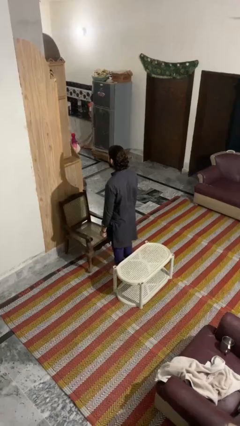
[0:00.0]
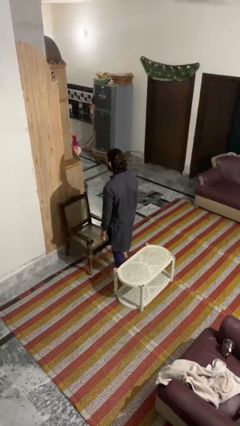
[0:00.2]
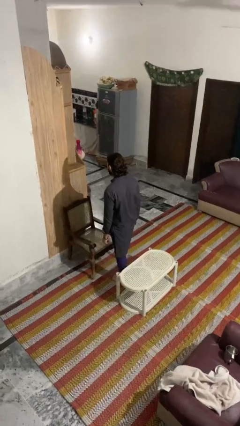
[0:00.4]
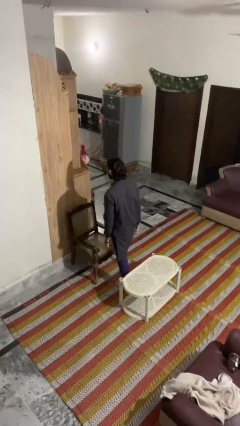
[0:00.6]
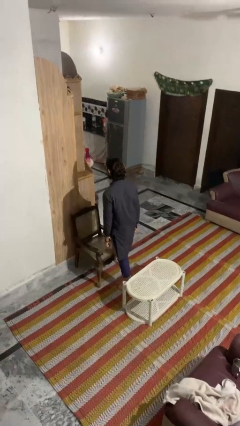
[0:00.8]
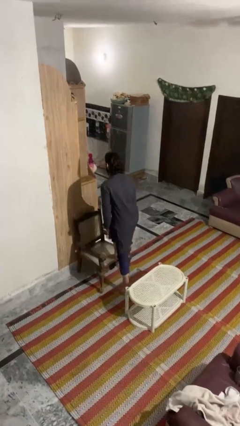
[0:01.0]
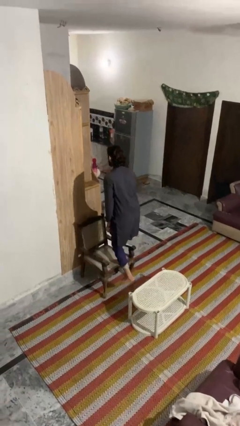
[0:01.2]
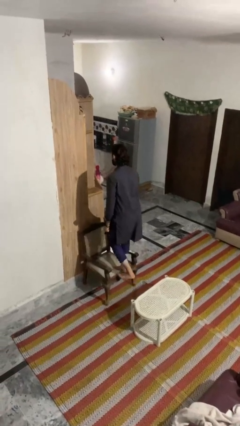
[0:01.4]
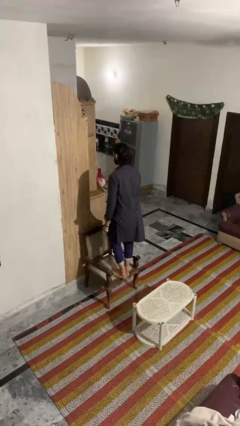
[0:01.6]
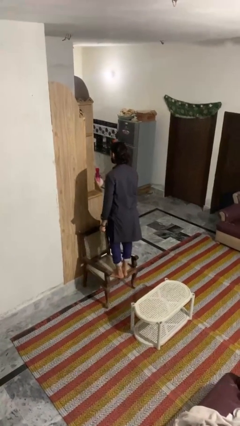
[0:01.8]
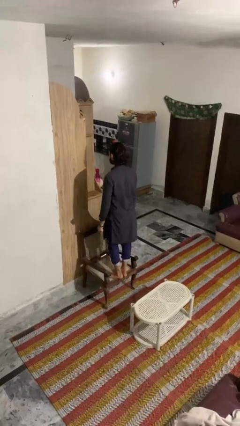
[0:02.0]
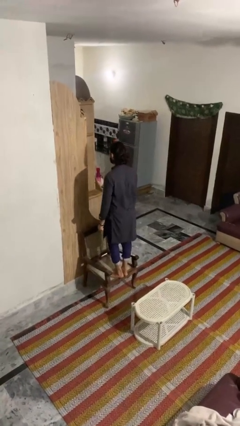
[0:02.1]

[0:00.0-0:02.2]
person climbs on chair

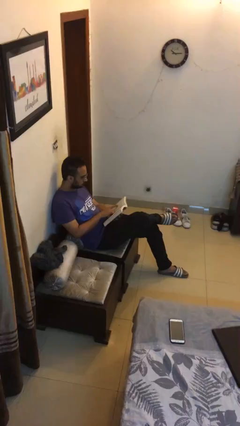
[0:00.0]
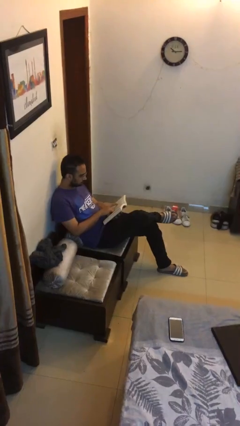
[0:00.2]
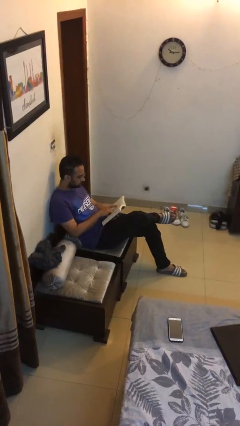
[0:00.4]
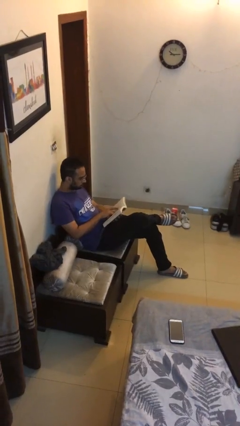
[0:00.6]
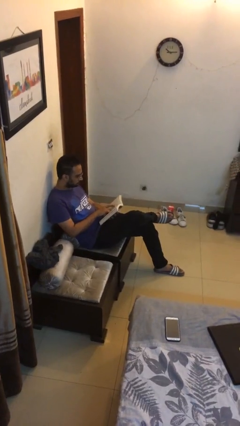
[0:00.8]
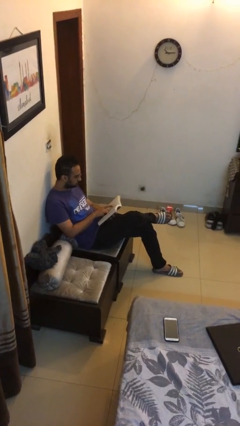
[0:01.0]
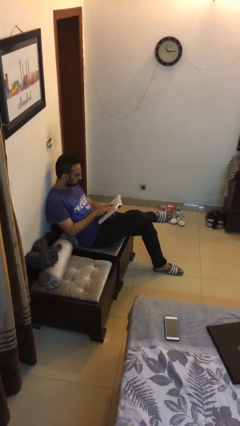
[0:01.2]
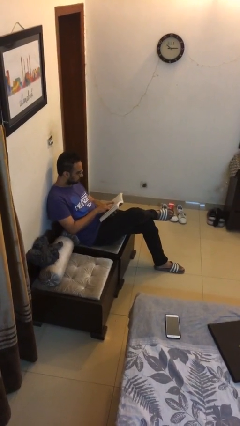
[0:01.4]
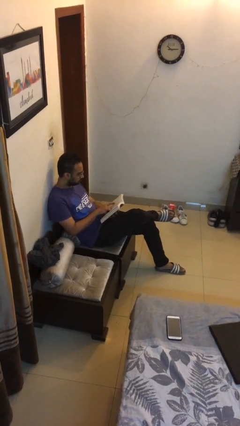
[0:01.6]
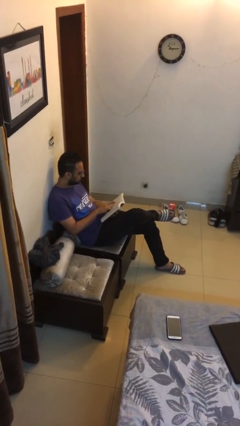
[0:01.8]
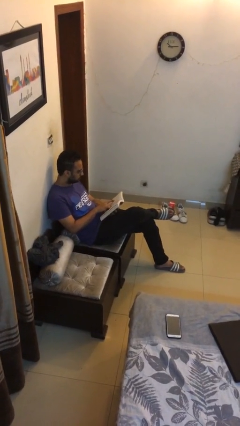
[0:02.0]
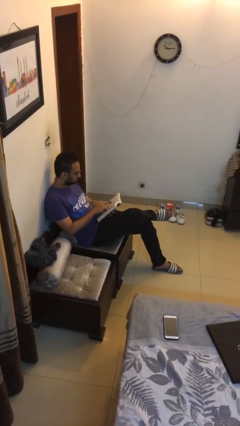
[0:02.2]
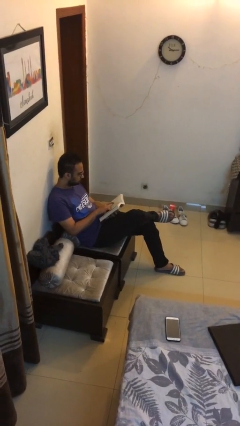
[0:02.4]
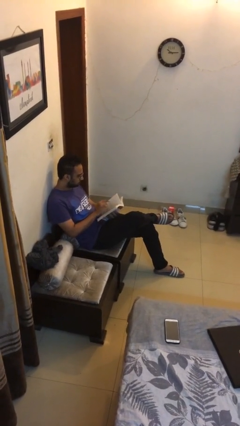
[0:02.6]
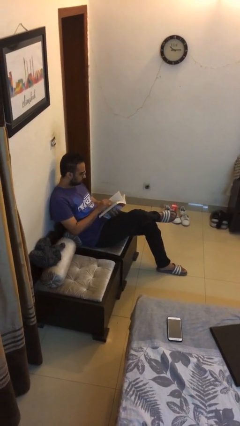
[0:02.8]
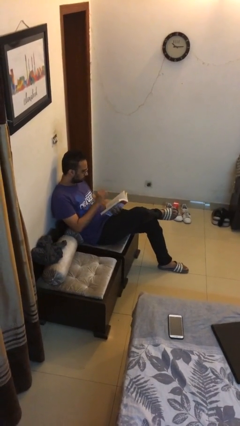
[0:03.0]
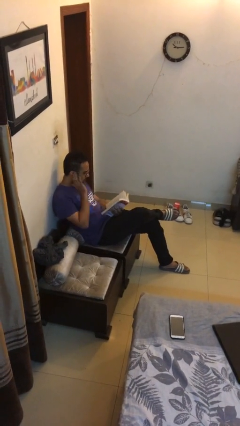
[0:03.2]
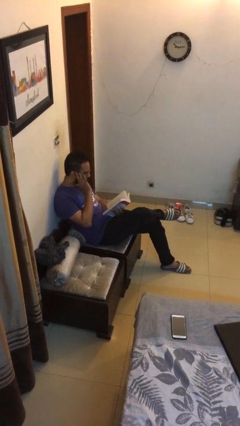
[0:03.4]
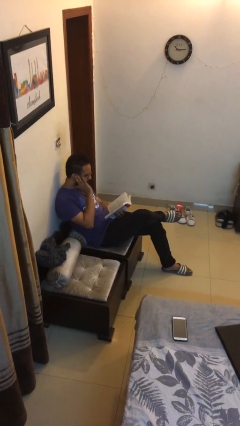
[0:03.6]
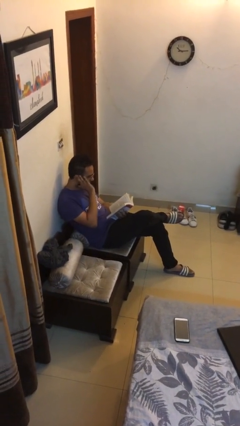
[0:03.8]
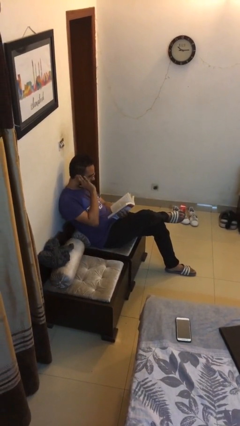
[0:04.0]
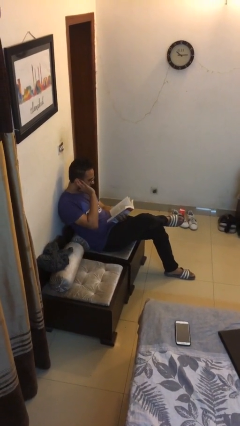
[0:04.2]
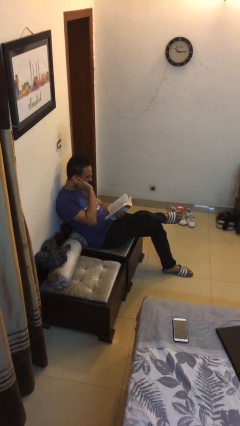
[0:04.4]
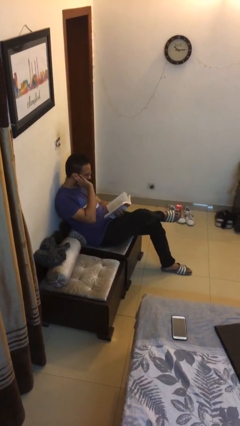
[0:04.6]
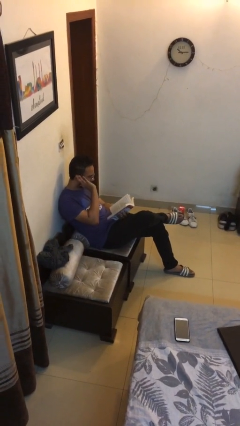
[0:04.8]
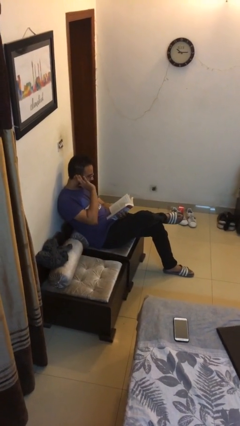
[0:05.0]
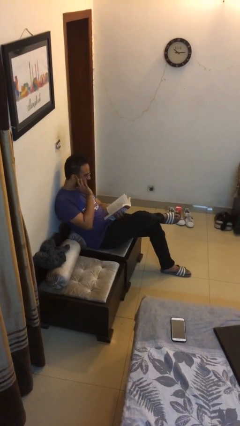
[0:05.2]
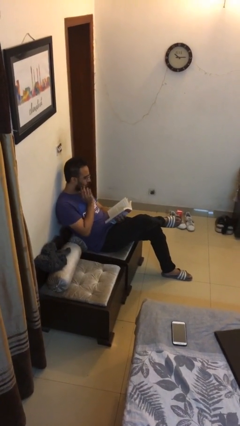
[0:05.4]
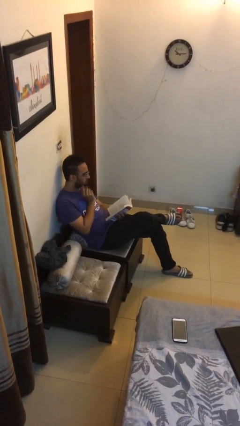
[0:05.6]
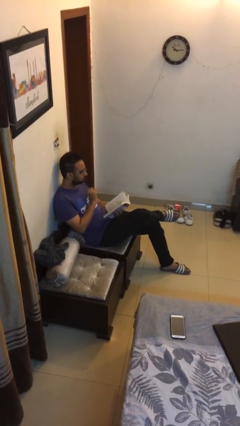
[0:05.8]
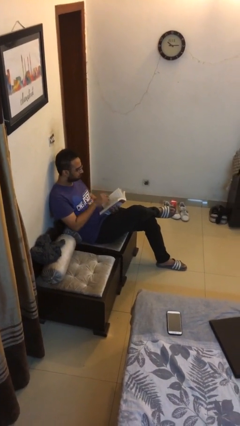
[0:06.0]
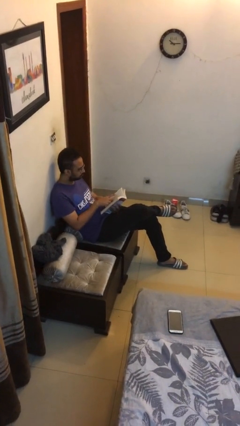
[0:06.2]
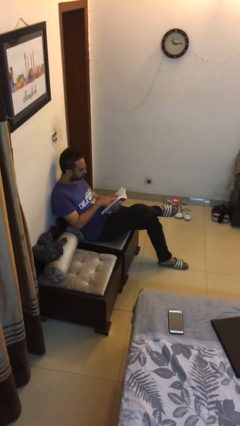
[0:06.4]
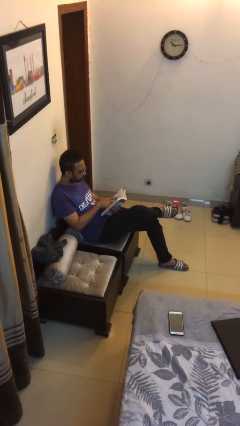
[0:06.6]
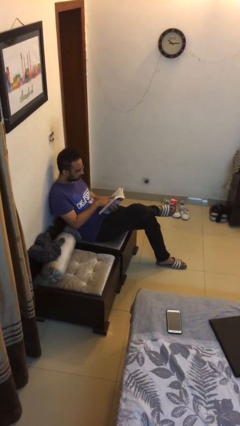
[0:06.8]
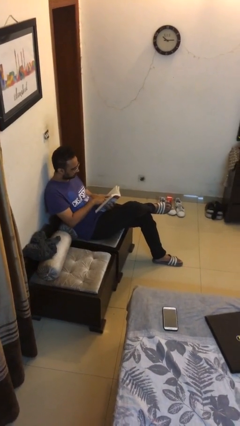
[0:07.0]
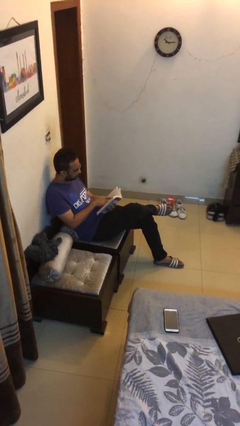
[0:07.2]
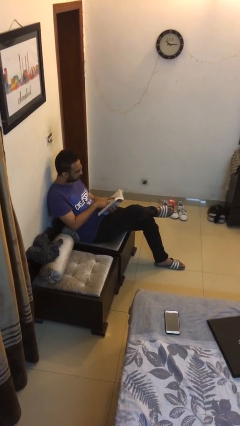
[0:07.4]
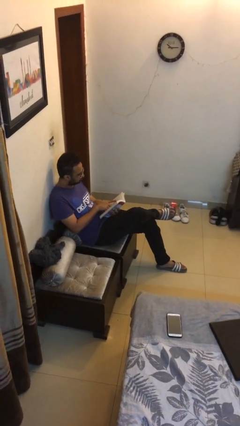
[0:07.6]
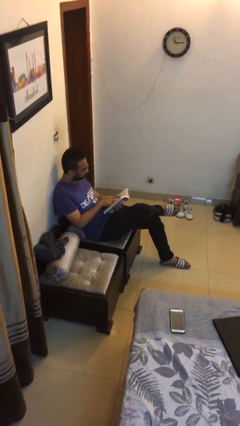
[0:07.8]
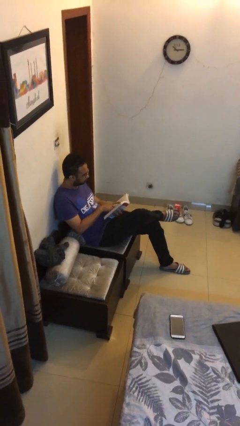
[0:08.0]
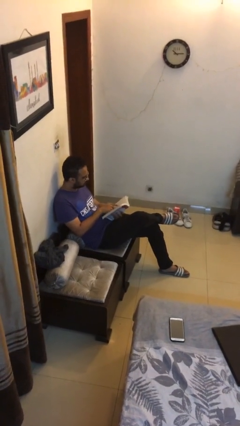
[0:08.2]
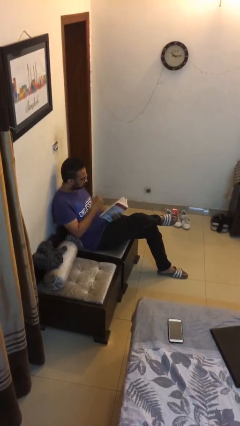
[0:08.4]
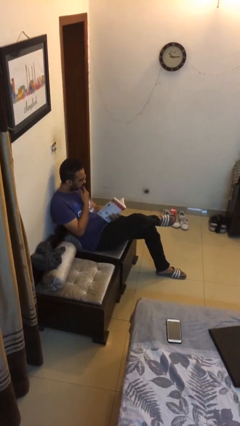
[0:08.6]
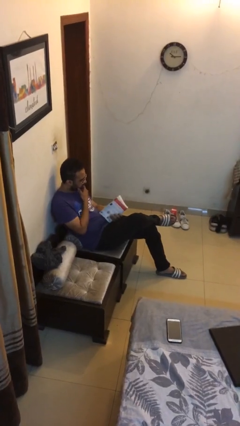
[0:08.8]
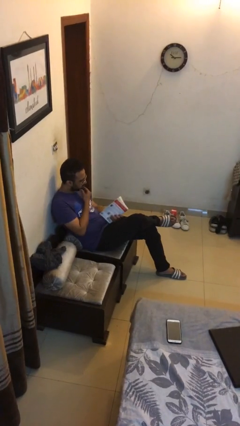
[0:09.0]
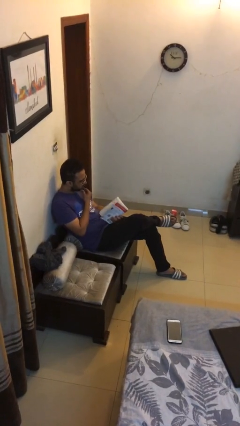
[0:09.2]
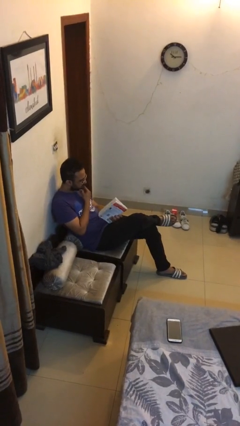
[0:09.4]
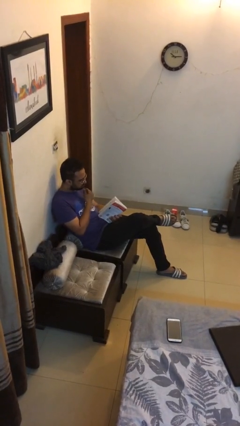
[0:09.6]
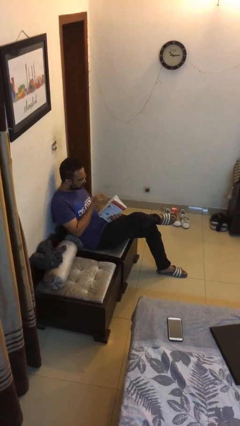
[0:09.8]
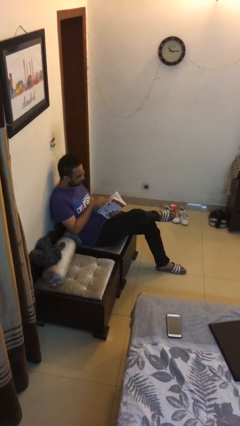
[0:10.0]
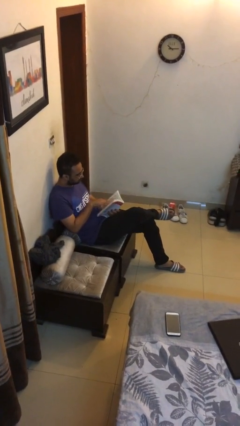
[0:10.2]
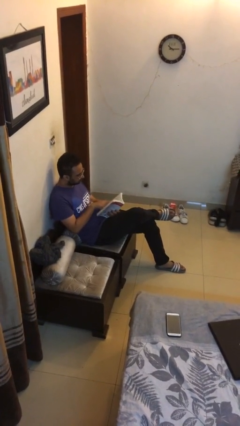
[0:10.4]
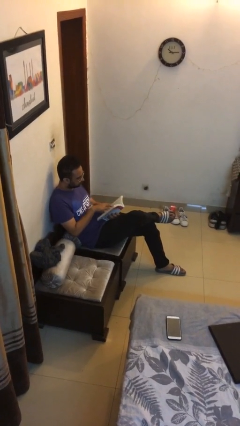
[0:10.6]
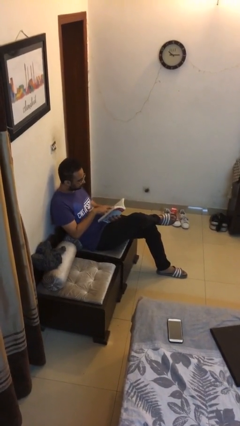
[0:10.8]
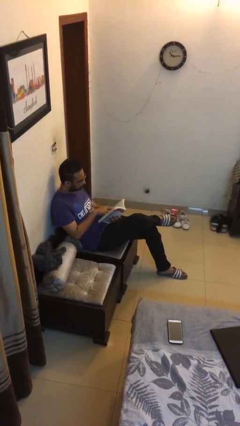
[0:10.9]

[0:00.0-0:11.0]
person reads document

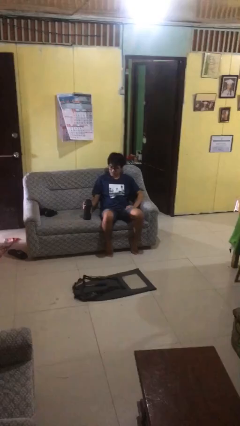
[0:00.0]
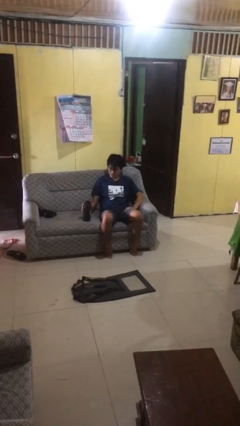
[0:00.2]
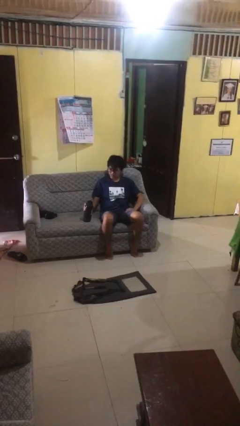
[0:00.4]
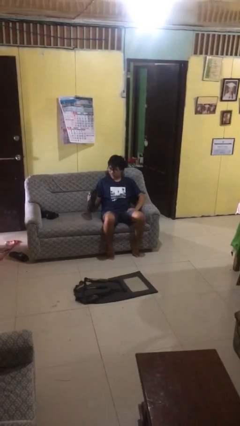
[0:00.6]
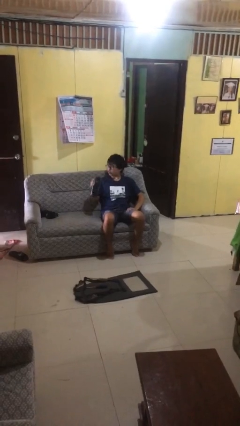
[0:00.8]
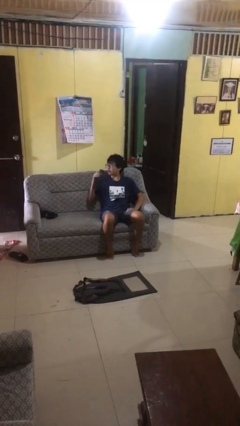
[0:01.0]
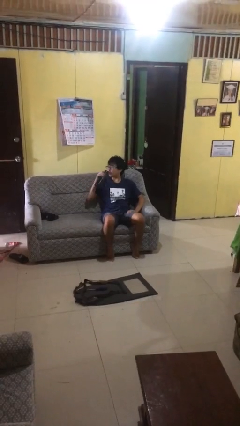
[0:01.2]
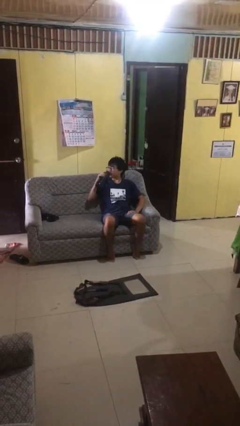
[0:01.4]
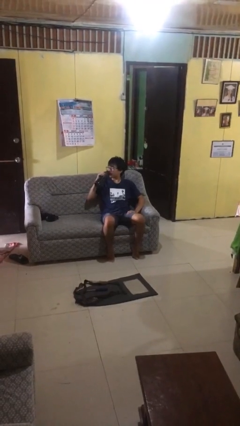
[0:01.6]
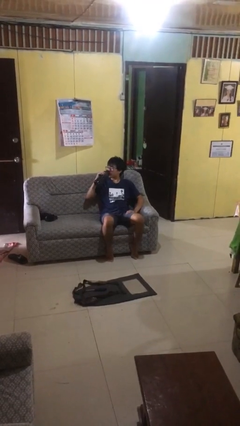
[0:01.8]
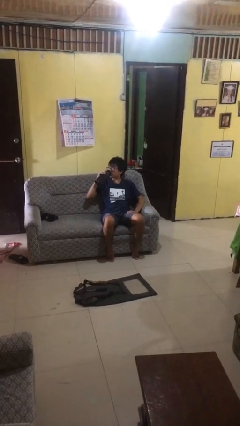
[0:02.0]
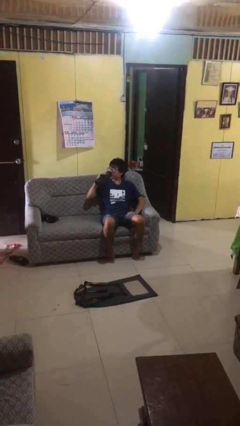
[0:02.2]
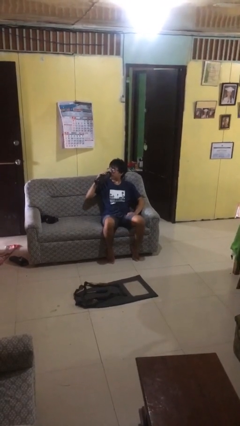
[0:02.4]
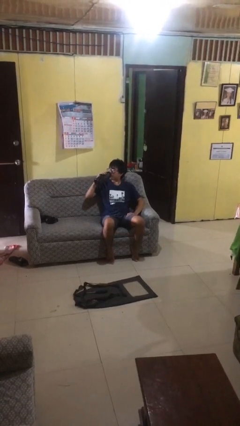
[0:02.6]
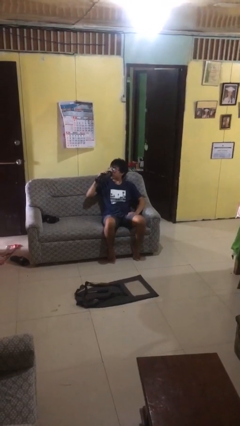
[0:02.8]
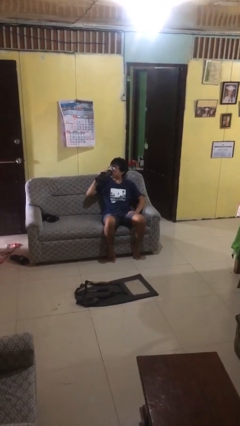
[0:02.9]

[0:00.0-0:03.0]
person drinks from bottle

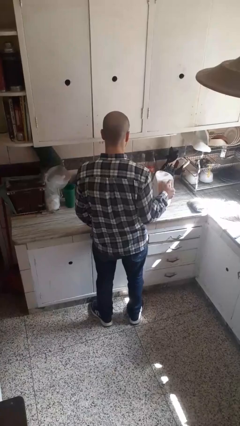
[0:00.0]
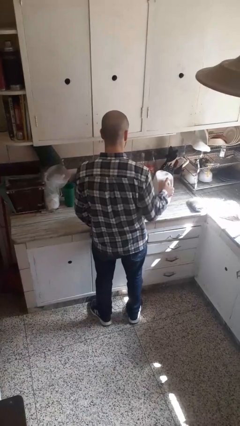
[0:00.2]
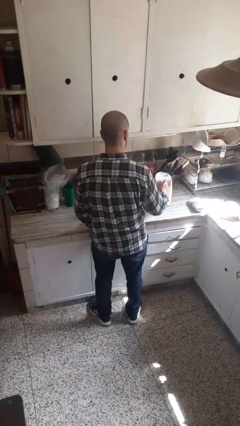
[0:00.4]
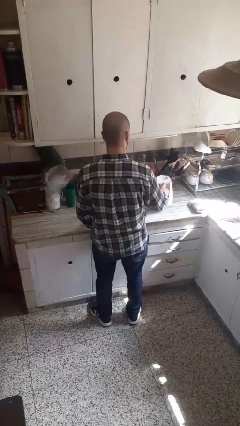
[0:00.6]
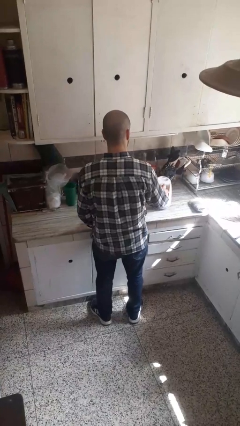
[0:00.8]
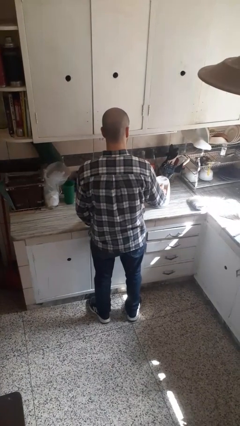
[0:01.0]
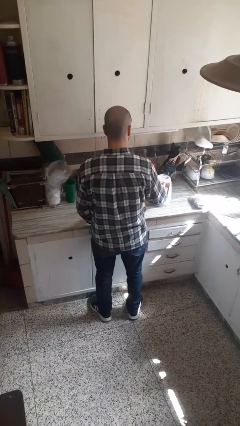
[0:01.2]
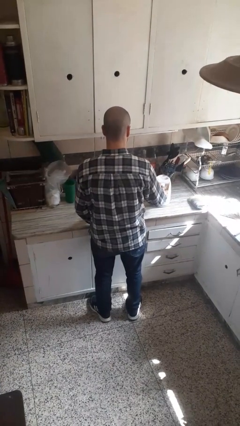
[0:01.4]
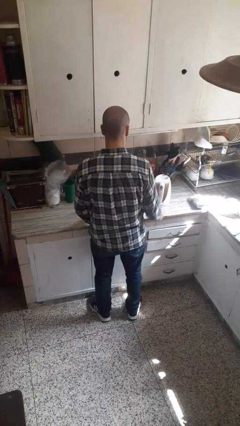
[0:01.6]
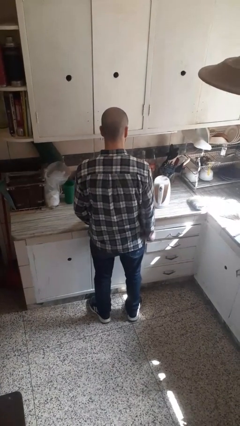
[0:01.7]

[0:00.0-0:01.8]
person puts down object on countertop
